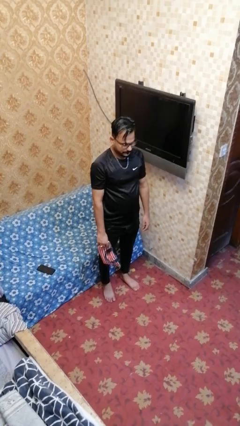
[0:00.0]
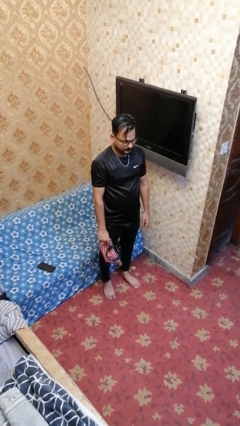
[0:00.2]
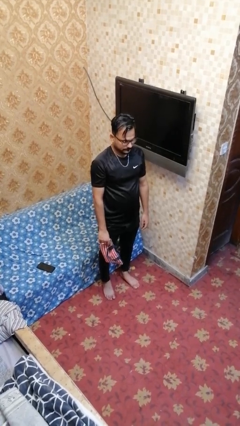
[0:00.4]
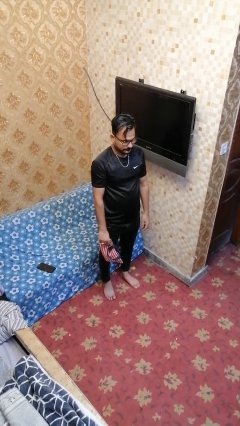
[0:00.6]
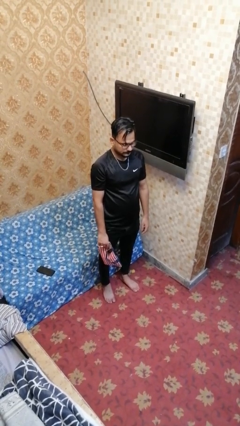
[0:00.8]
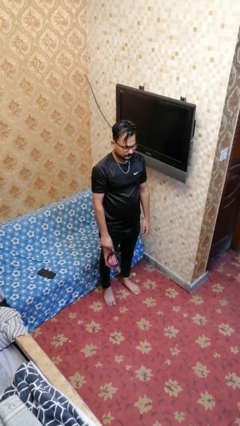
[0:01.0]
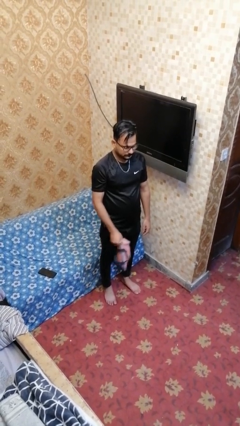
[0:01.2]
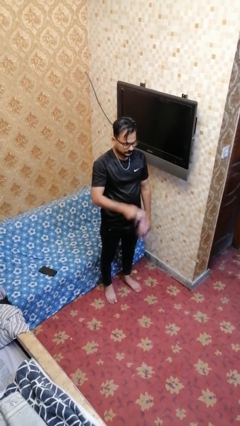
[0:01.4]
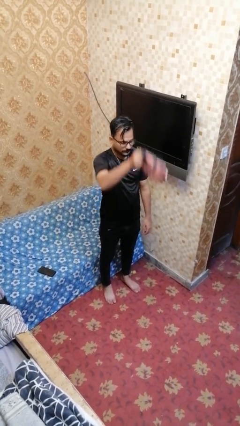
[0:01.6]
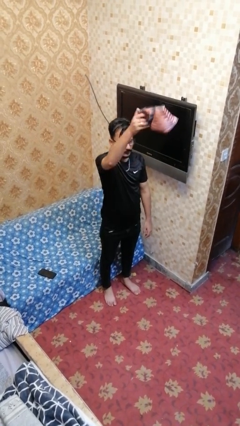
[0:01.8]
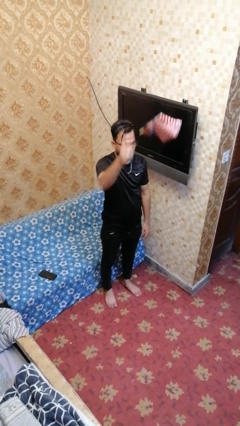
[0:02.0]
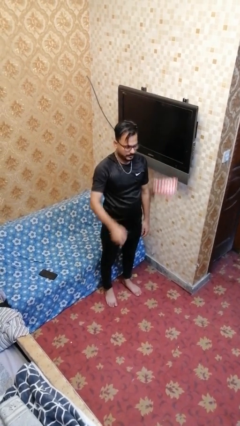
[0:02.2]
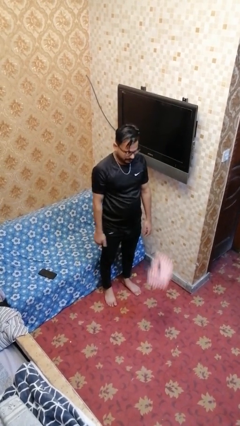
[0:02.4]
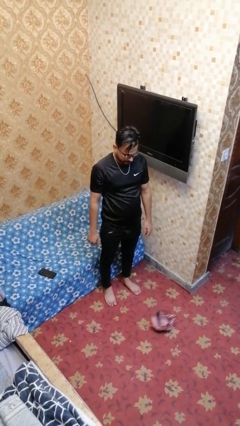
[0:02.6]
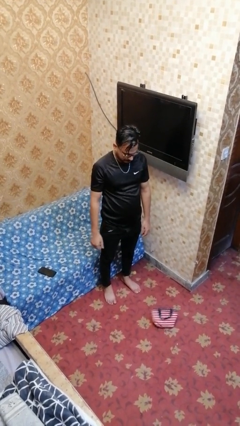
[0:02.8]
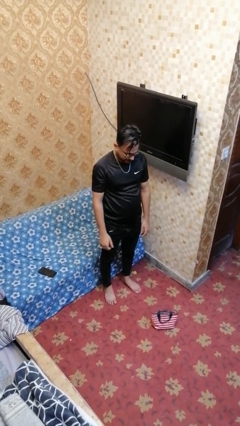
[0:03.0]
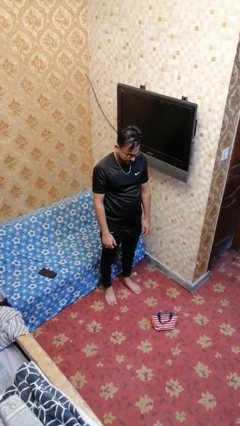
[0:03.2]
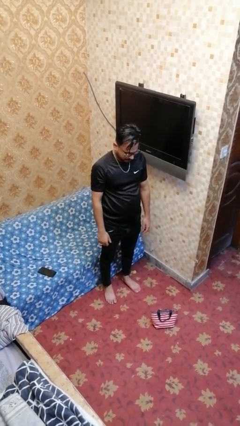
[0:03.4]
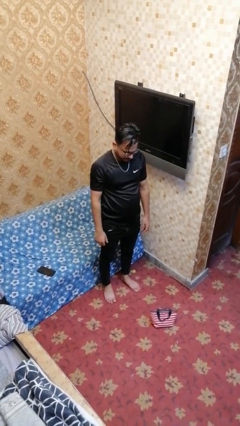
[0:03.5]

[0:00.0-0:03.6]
person throws object into air

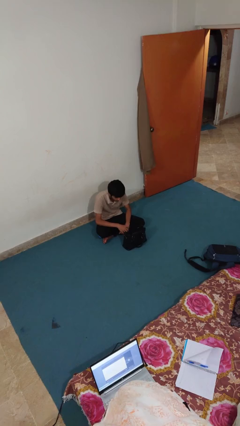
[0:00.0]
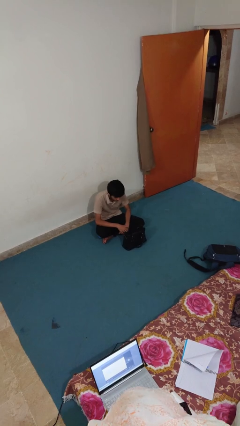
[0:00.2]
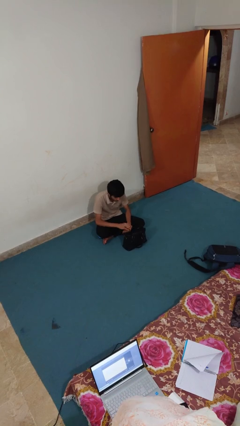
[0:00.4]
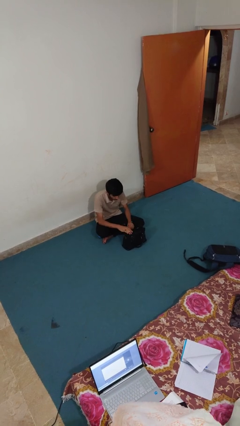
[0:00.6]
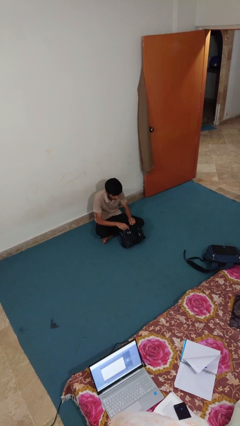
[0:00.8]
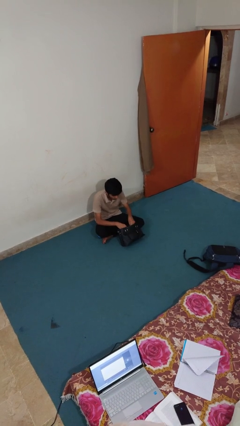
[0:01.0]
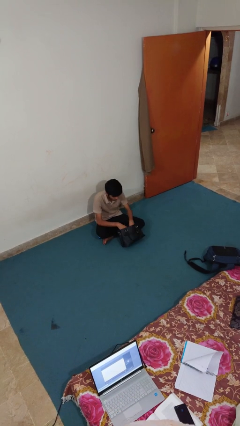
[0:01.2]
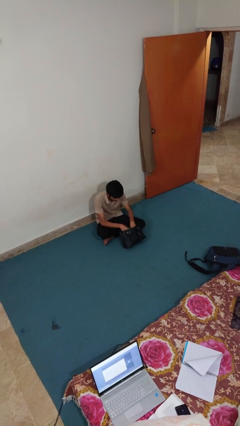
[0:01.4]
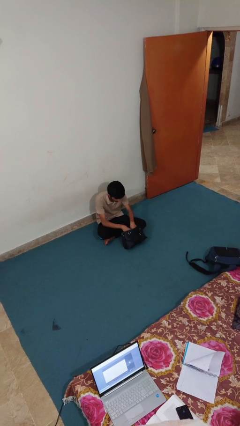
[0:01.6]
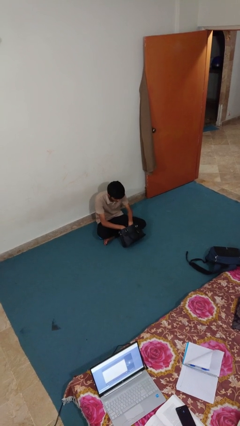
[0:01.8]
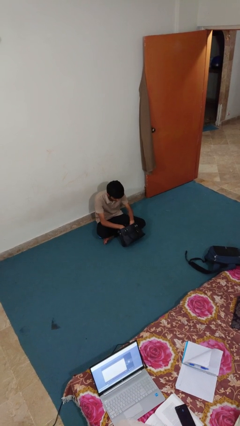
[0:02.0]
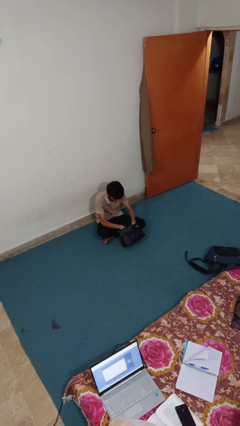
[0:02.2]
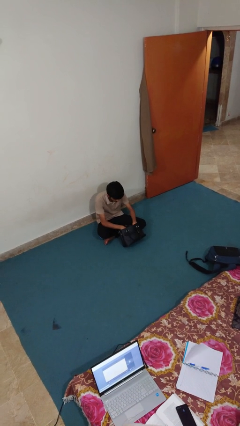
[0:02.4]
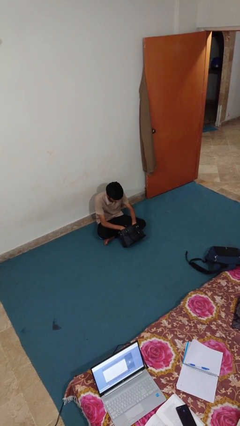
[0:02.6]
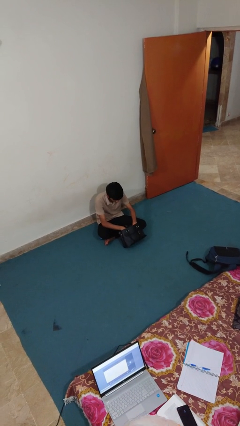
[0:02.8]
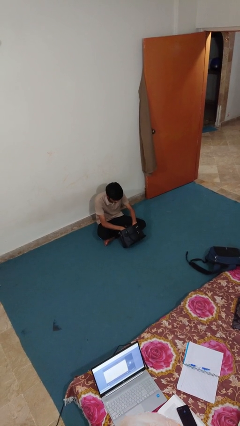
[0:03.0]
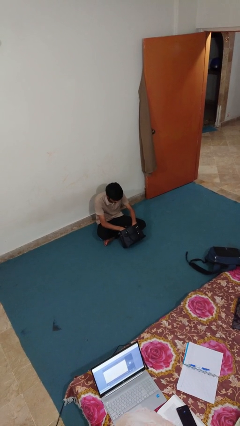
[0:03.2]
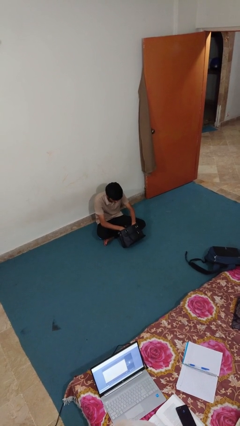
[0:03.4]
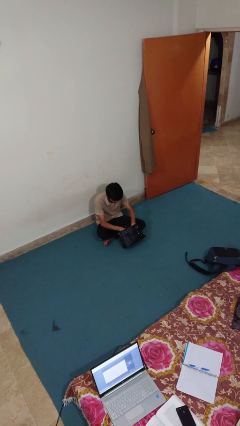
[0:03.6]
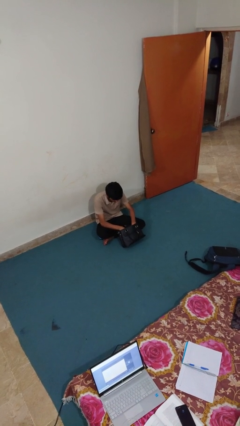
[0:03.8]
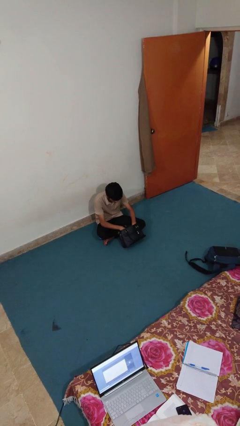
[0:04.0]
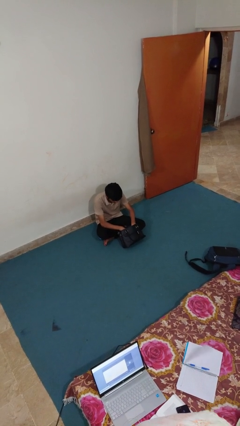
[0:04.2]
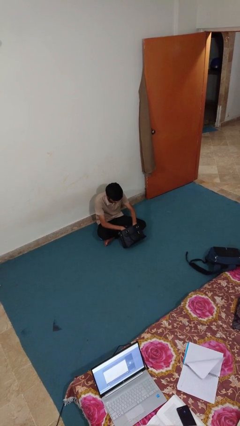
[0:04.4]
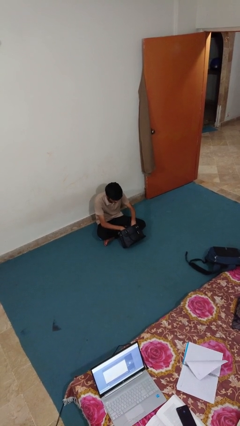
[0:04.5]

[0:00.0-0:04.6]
person searches in purse

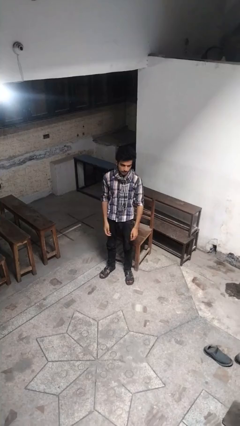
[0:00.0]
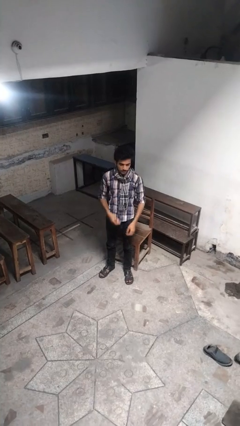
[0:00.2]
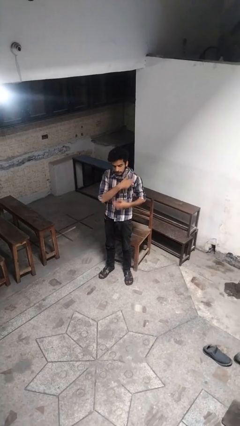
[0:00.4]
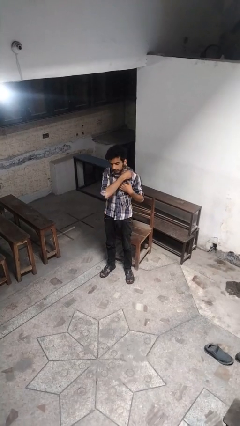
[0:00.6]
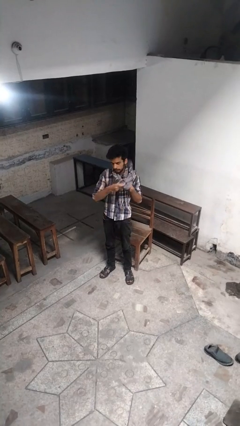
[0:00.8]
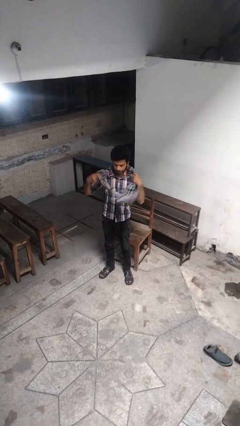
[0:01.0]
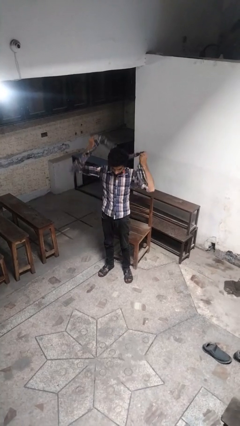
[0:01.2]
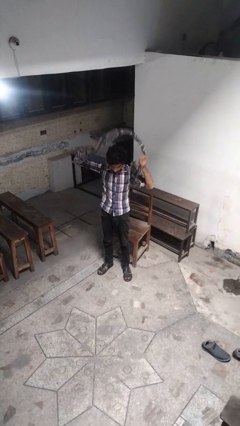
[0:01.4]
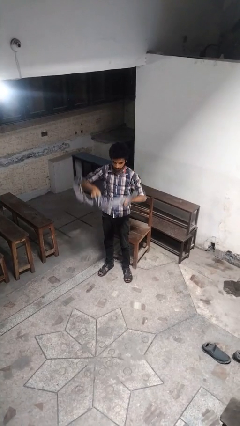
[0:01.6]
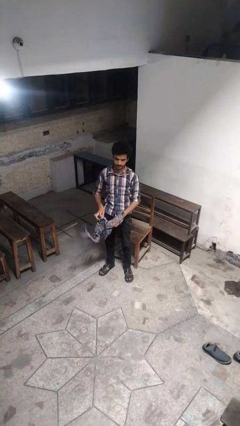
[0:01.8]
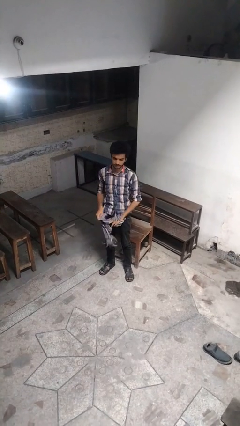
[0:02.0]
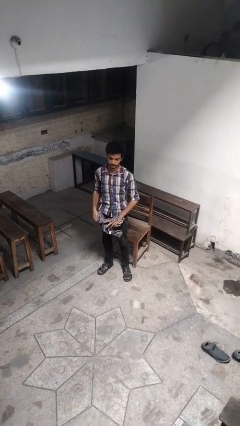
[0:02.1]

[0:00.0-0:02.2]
person takes off scarf

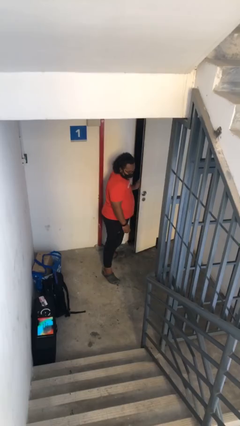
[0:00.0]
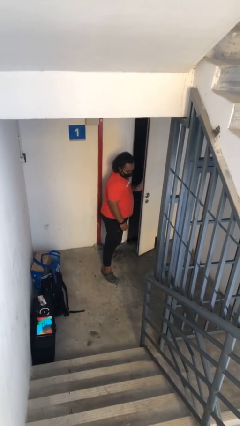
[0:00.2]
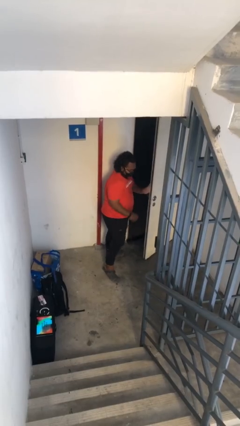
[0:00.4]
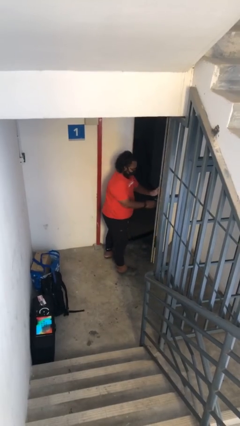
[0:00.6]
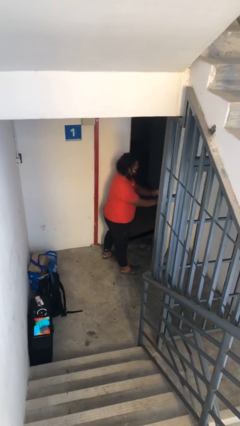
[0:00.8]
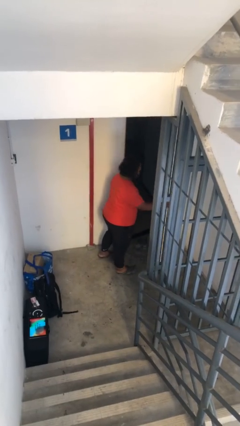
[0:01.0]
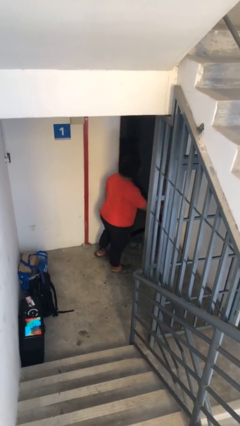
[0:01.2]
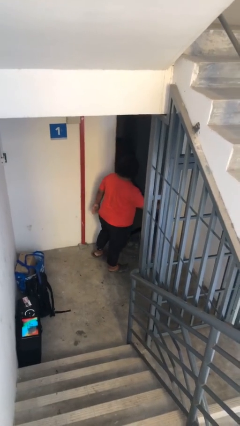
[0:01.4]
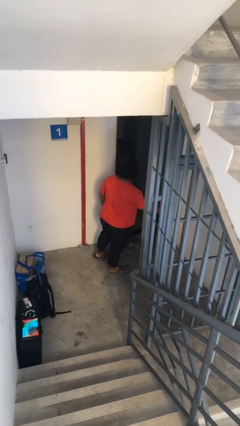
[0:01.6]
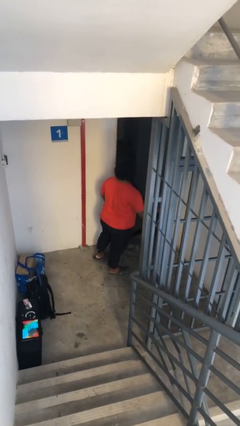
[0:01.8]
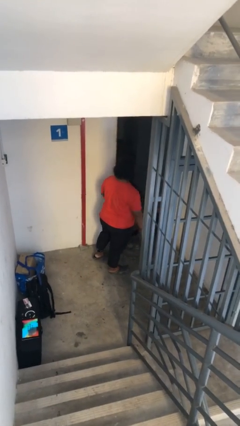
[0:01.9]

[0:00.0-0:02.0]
person opens facility door

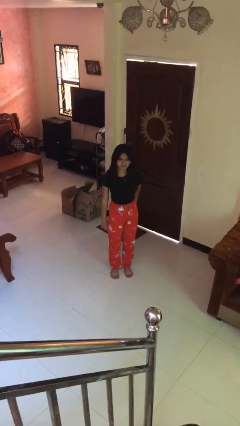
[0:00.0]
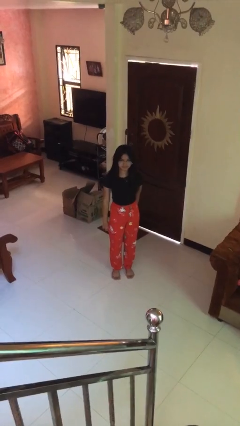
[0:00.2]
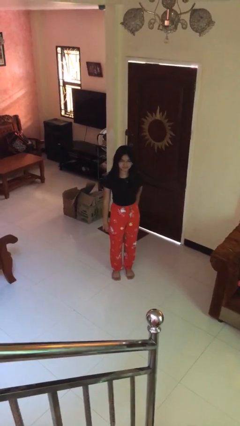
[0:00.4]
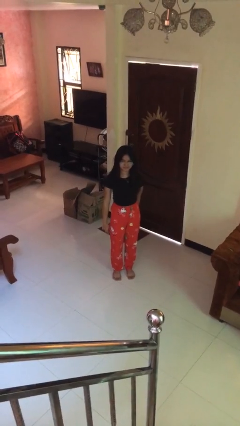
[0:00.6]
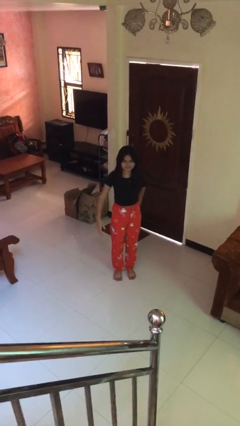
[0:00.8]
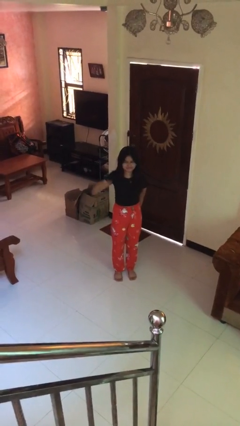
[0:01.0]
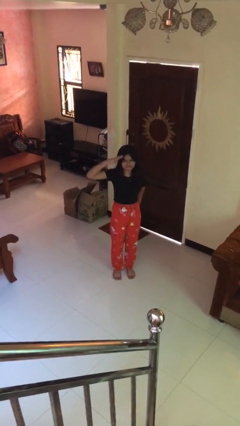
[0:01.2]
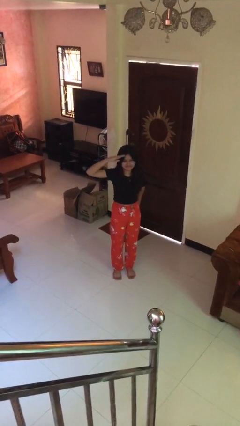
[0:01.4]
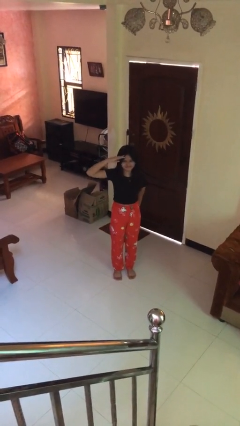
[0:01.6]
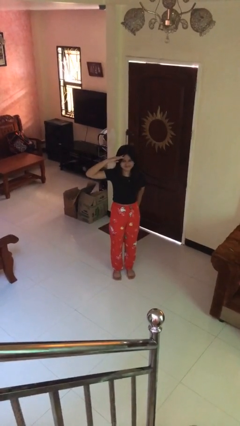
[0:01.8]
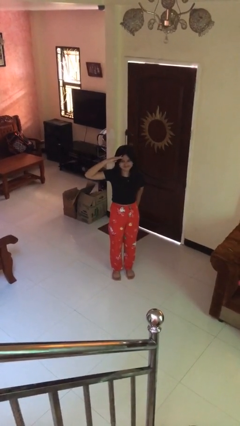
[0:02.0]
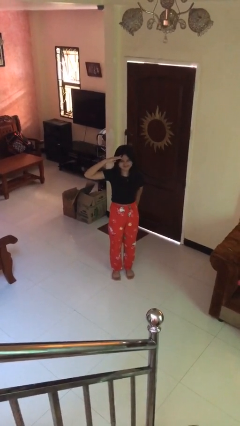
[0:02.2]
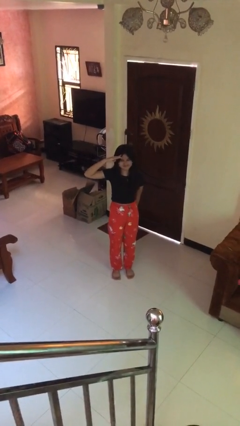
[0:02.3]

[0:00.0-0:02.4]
person salutes

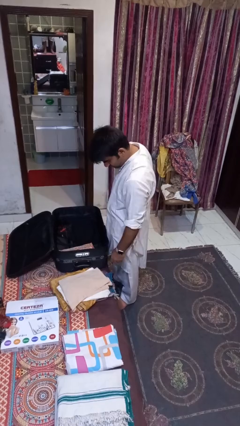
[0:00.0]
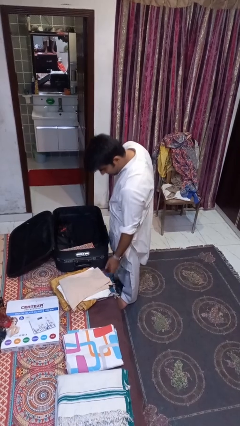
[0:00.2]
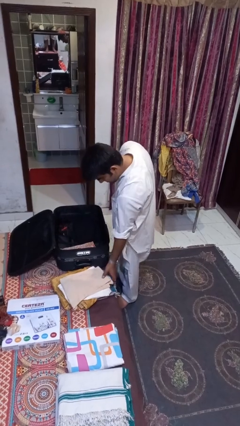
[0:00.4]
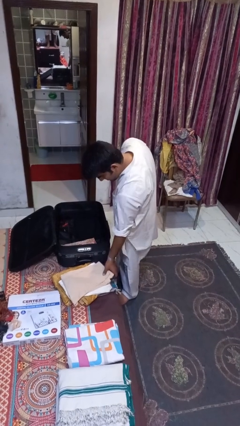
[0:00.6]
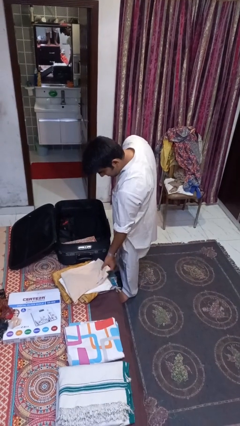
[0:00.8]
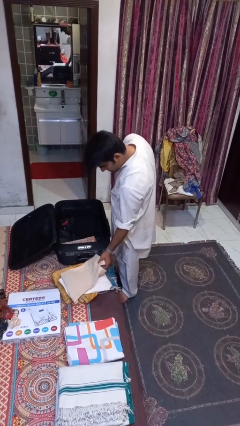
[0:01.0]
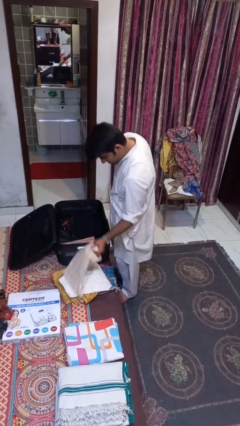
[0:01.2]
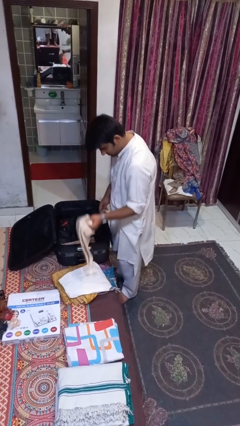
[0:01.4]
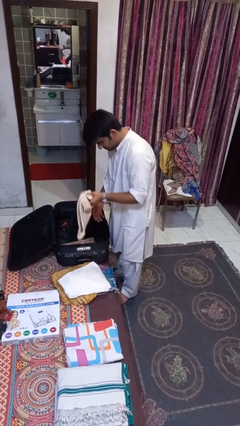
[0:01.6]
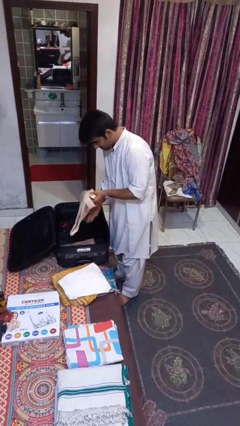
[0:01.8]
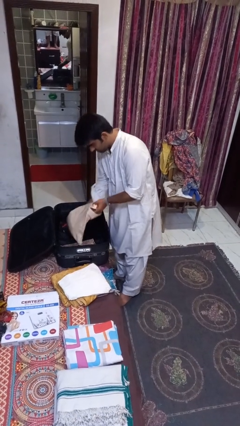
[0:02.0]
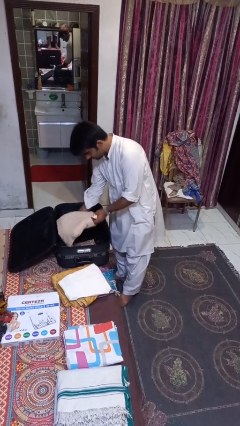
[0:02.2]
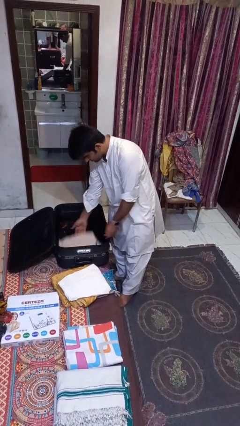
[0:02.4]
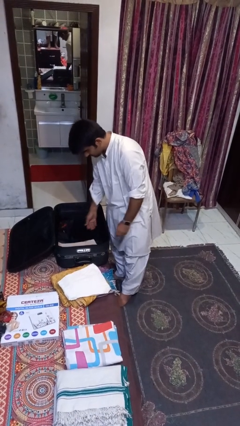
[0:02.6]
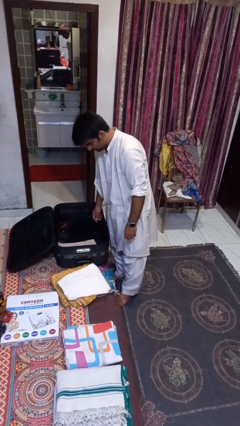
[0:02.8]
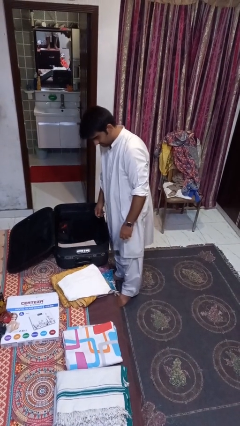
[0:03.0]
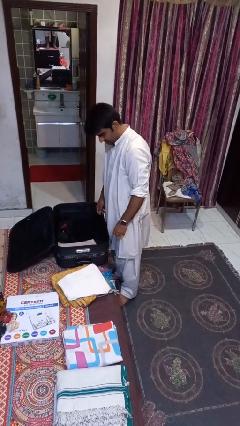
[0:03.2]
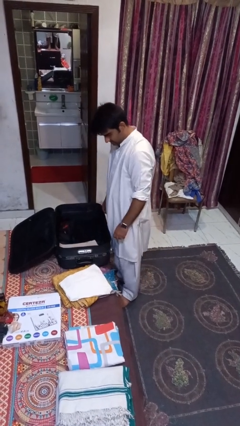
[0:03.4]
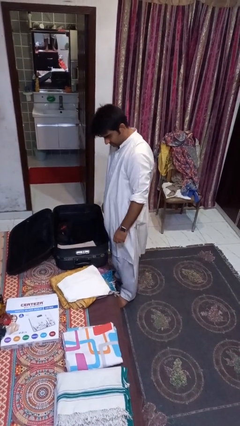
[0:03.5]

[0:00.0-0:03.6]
person loads clothes into suitcase
